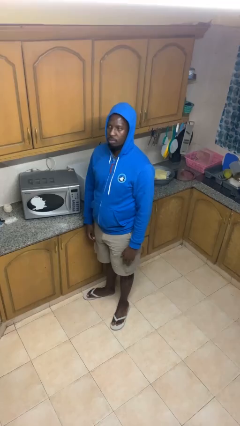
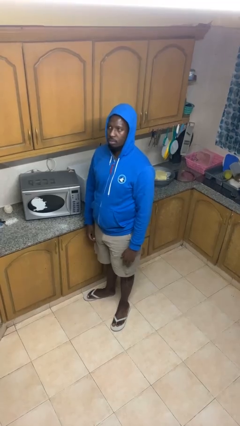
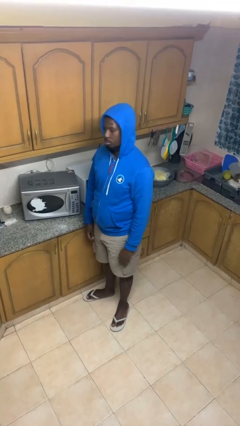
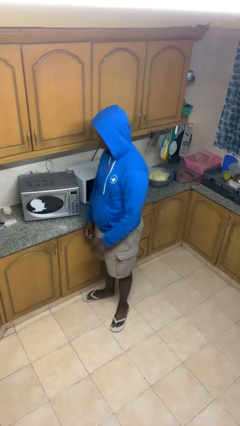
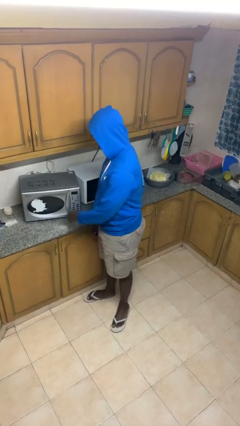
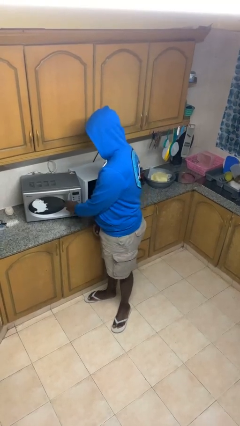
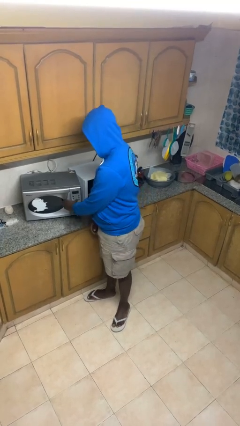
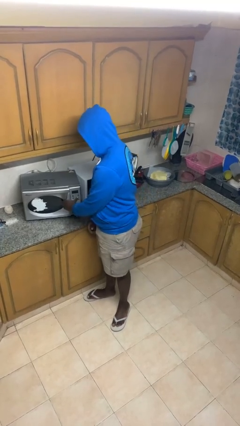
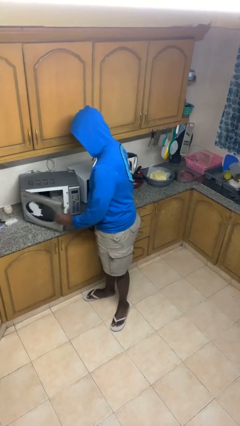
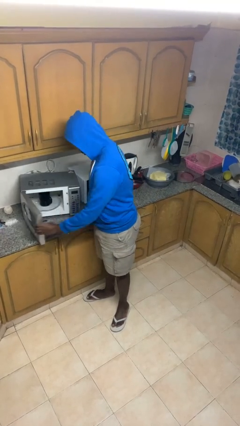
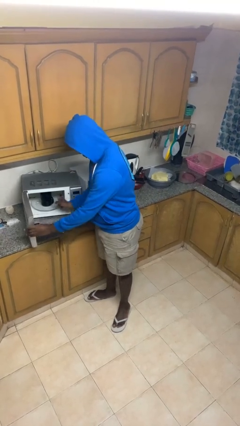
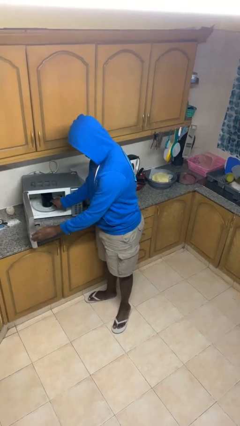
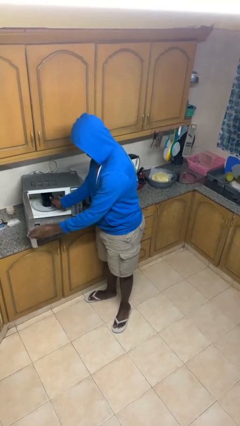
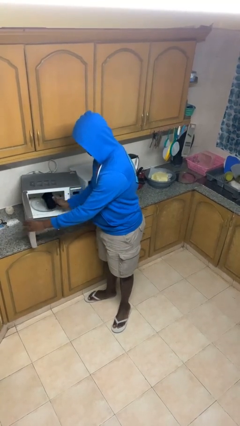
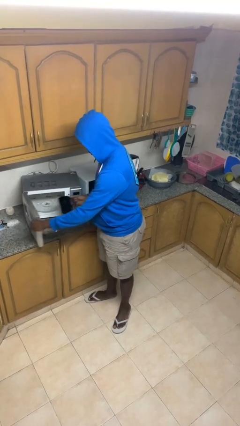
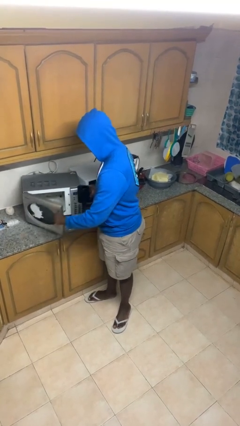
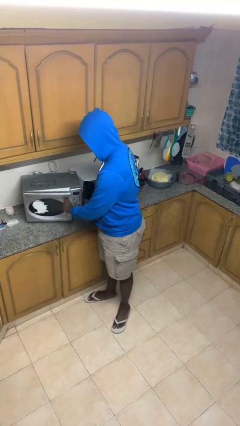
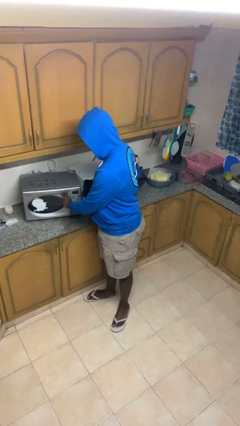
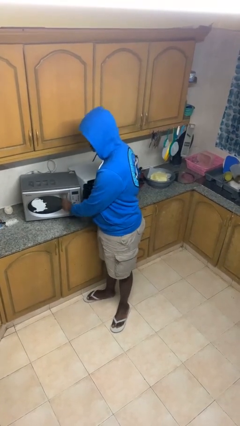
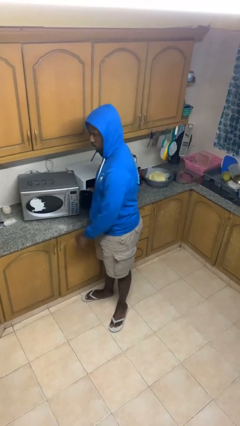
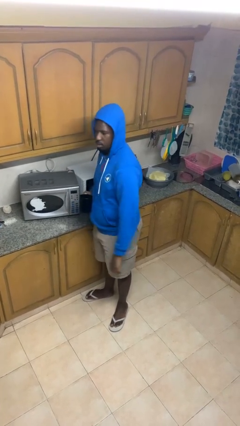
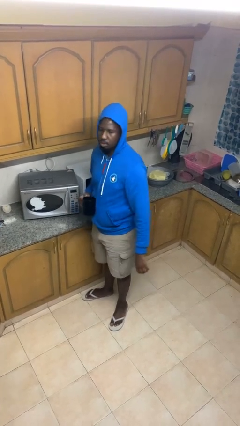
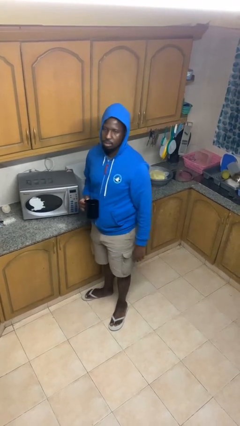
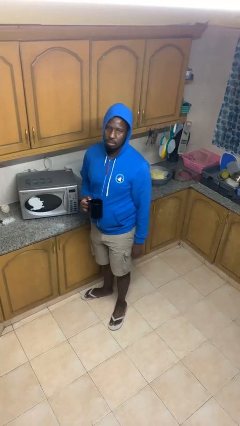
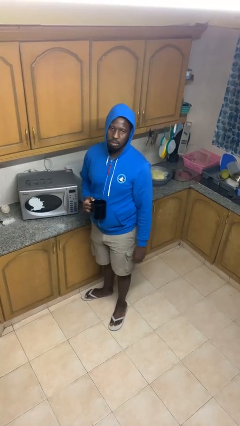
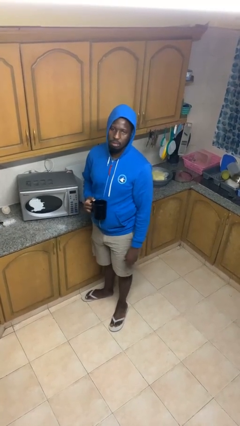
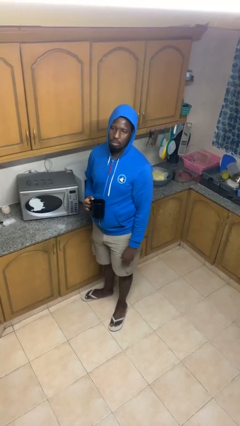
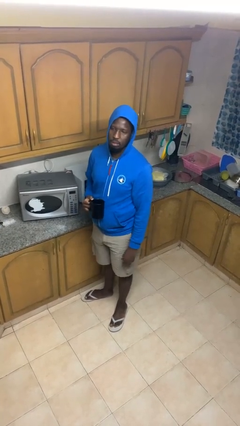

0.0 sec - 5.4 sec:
person takes object from microwave

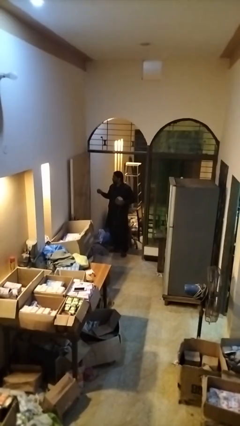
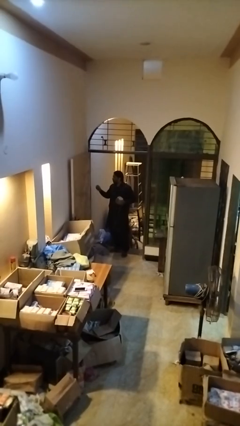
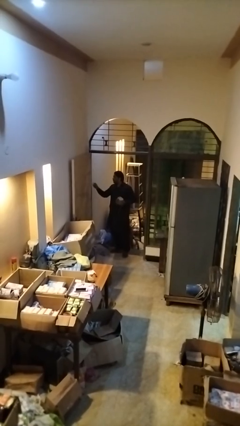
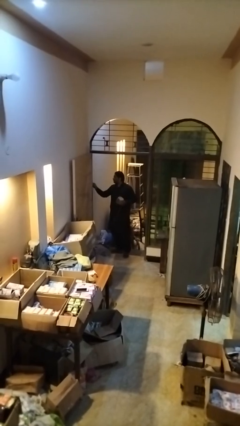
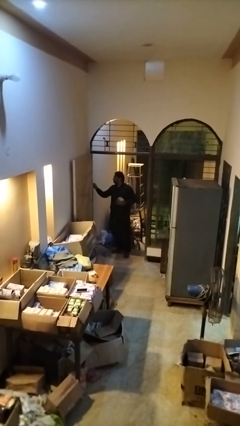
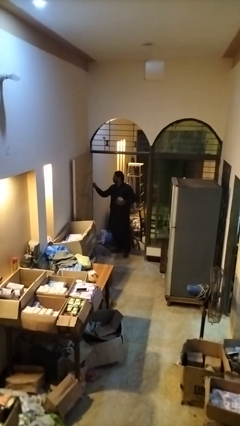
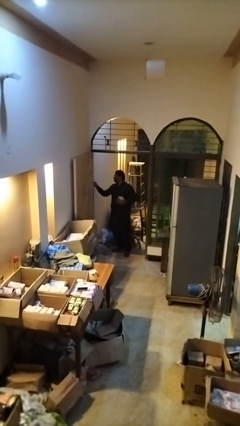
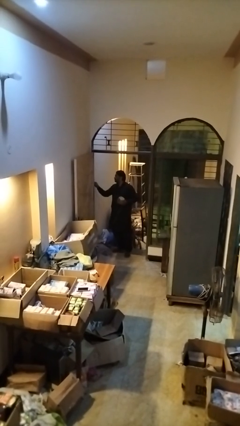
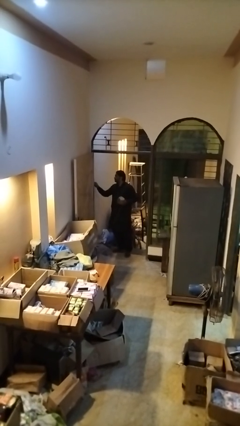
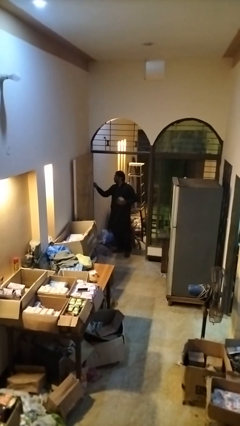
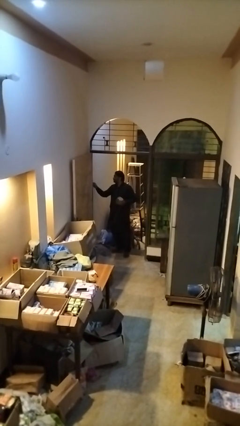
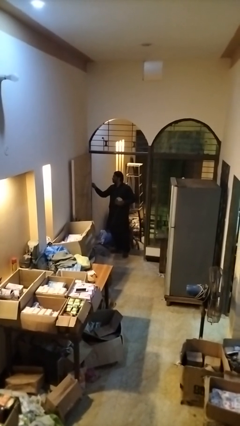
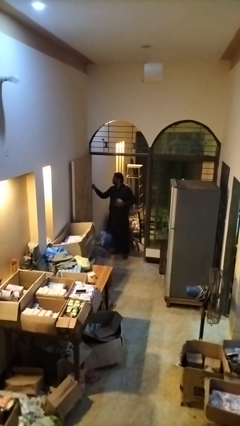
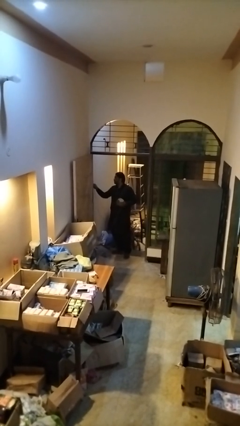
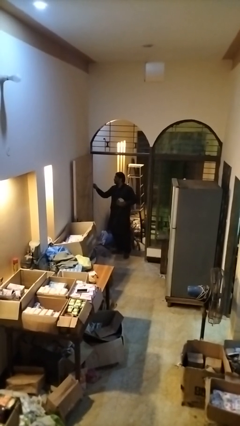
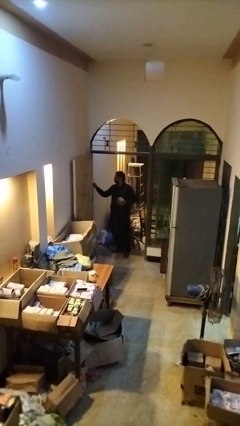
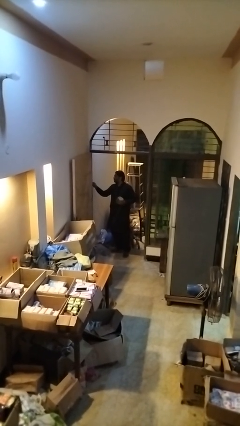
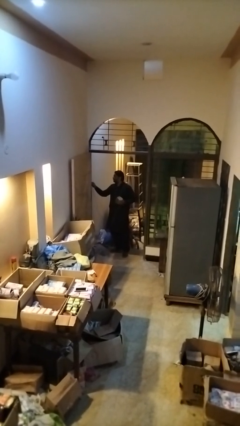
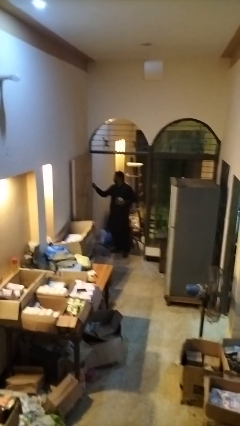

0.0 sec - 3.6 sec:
person plugs into electrical socket

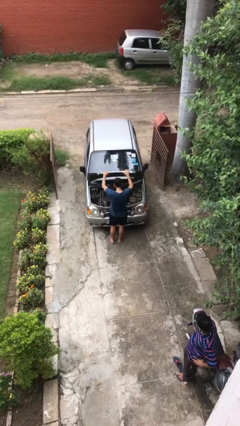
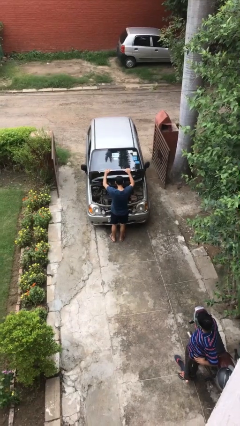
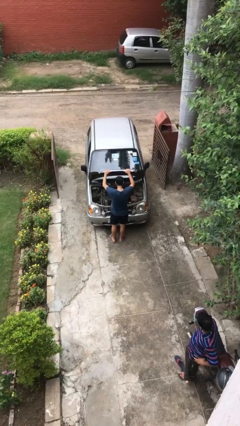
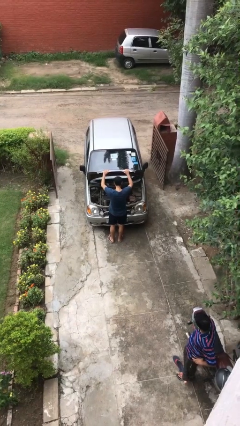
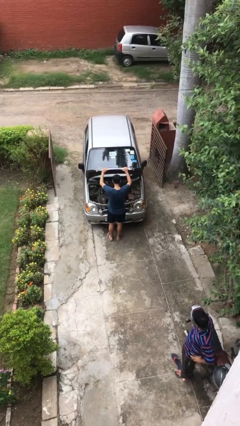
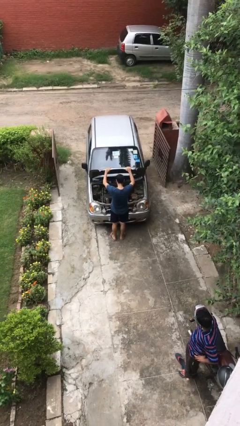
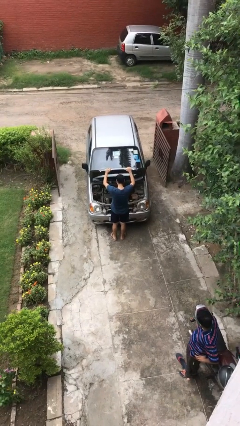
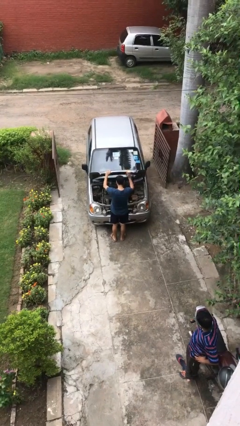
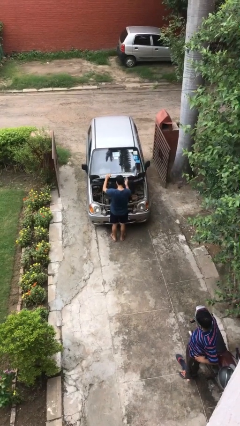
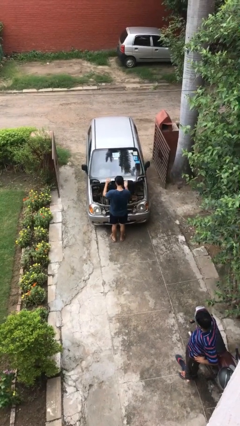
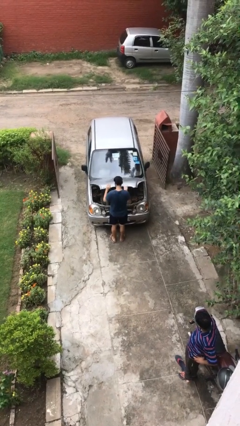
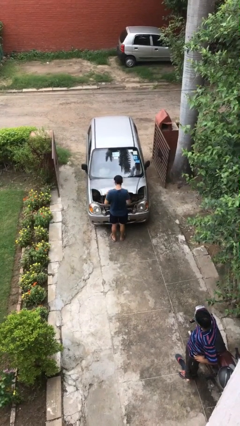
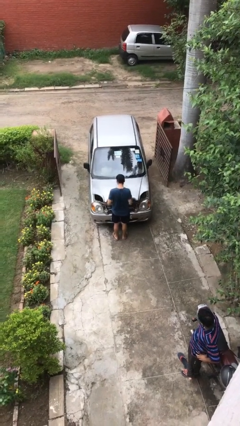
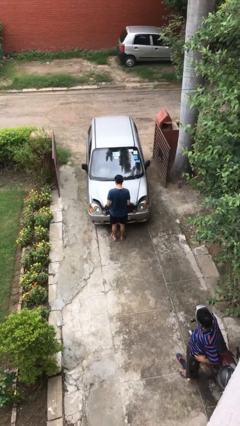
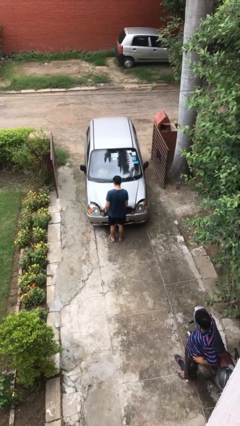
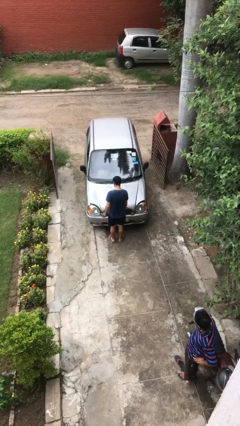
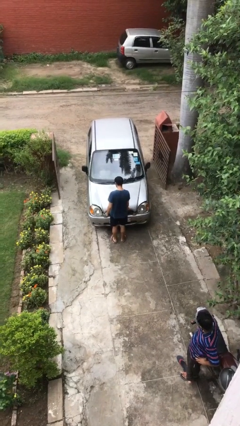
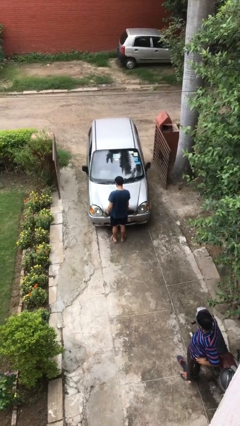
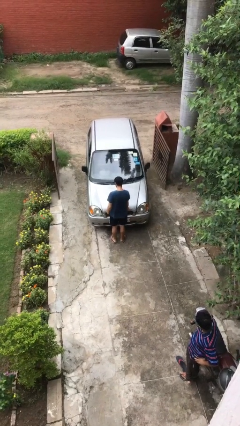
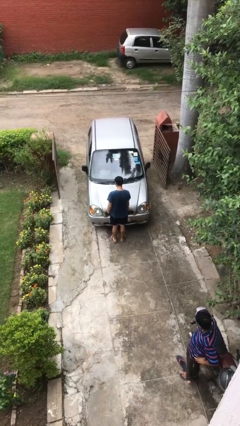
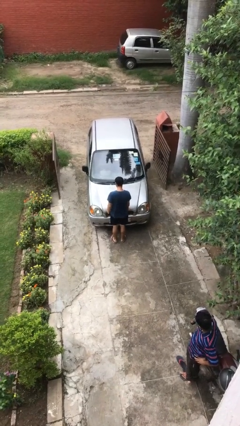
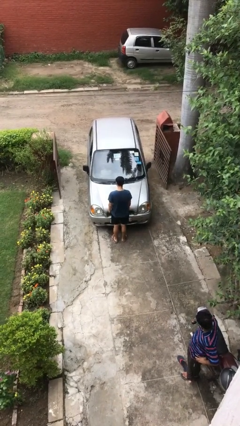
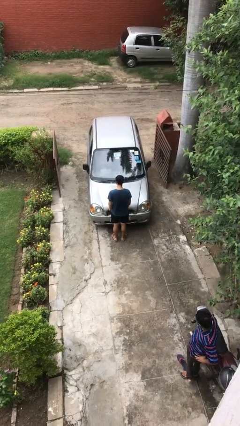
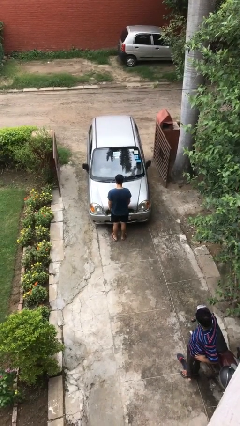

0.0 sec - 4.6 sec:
person closes car hood

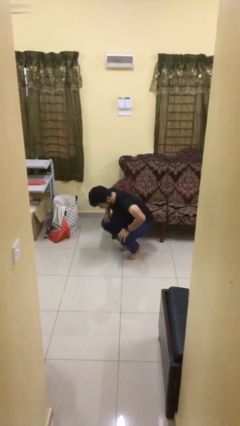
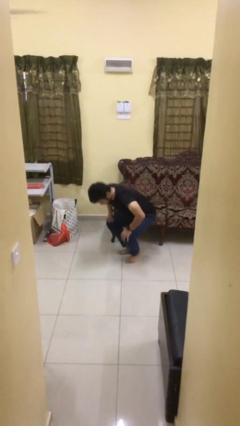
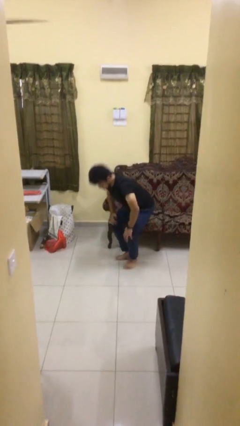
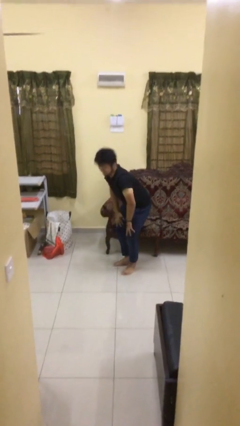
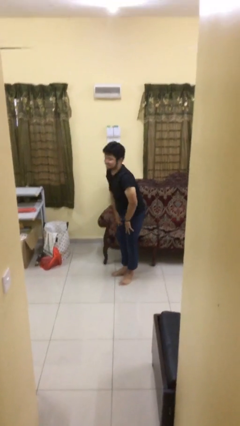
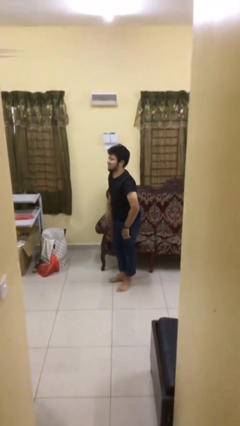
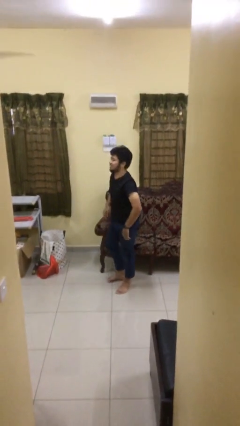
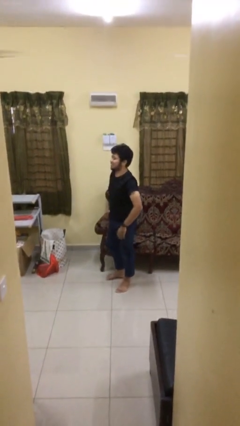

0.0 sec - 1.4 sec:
person stands up

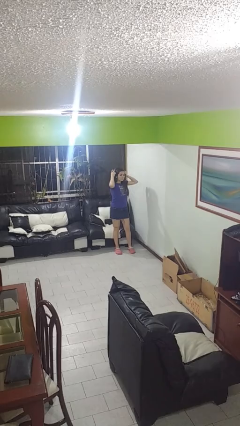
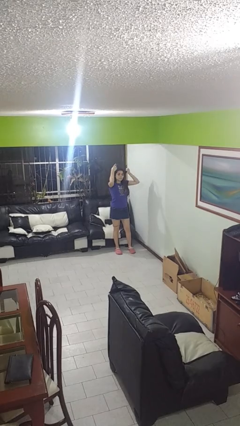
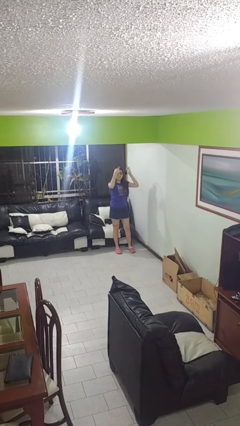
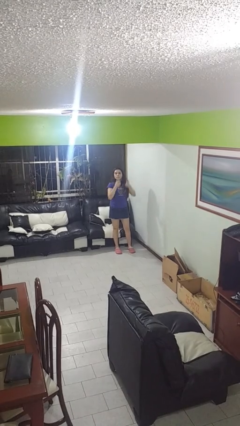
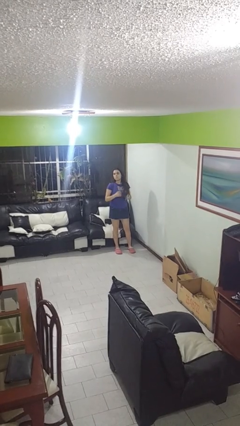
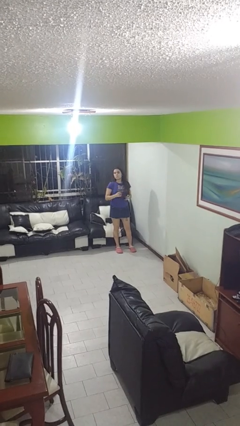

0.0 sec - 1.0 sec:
person takes off headphones

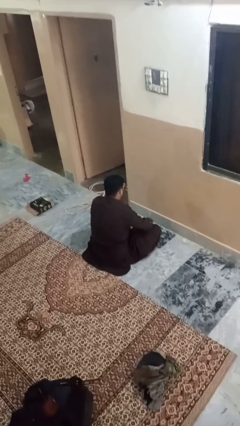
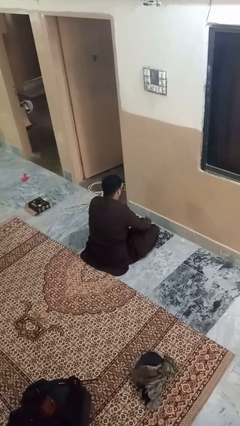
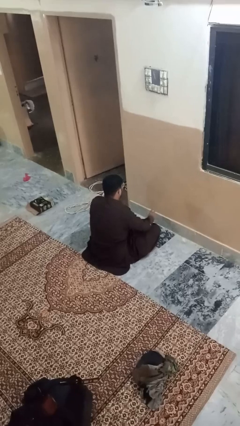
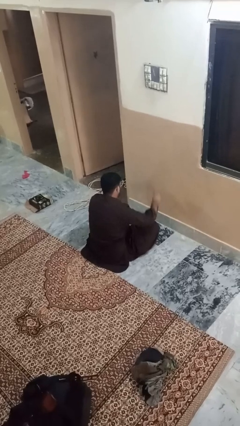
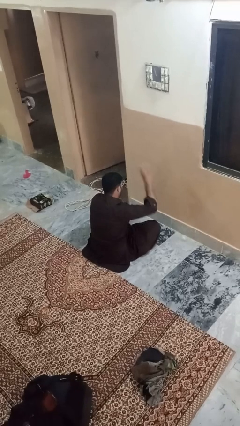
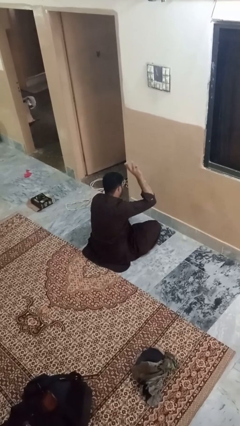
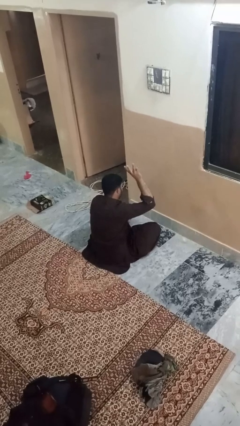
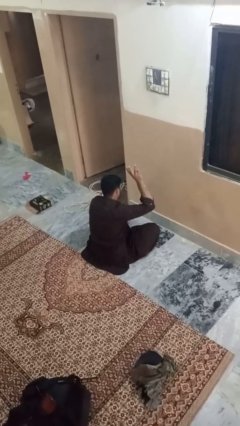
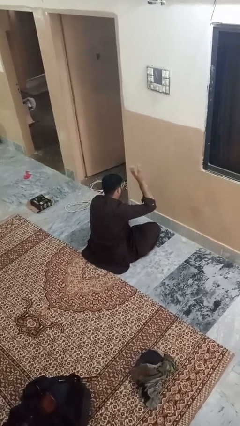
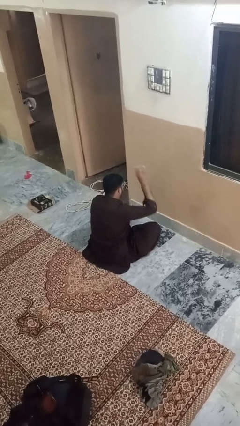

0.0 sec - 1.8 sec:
person gestures number three
